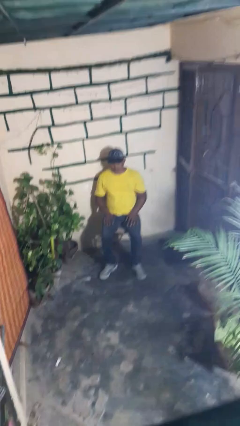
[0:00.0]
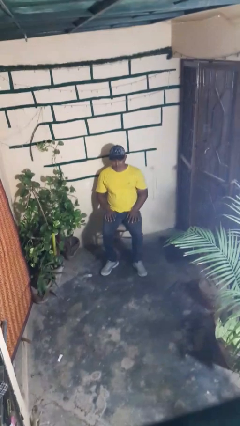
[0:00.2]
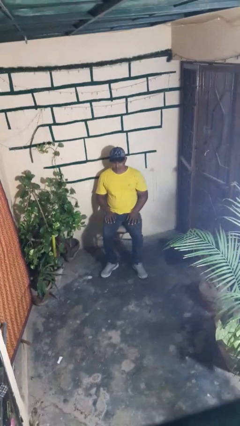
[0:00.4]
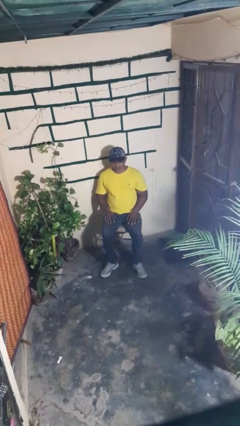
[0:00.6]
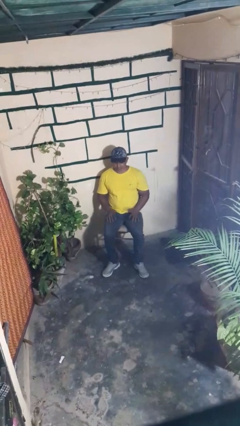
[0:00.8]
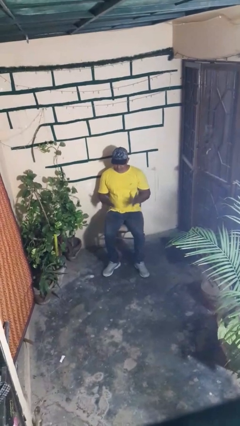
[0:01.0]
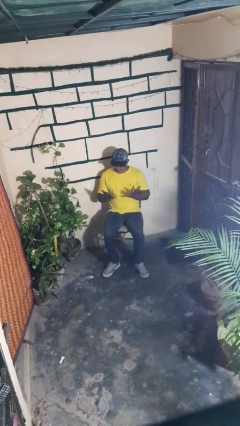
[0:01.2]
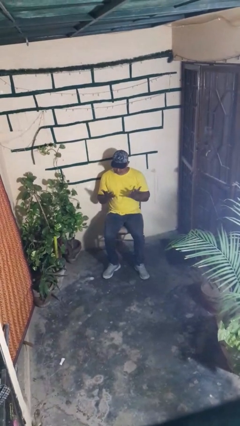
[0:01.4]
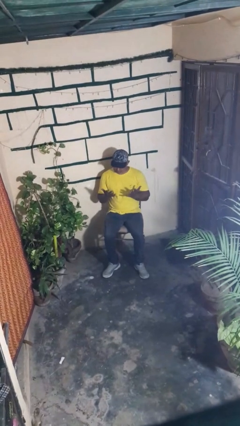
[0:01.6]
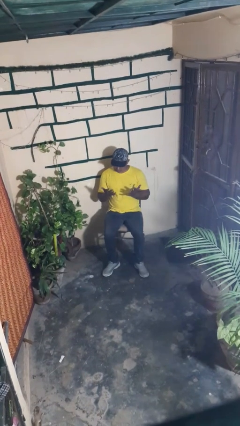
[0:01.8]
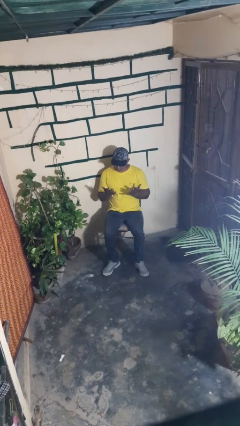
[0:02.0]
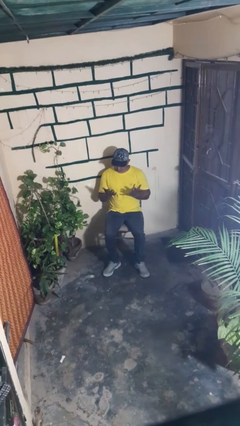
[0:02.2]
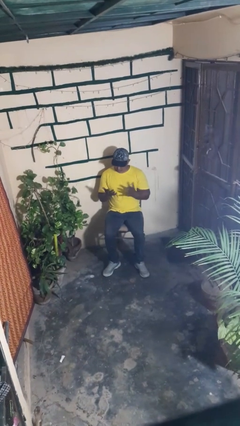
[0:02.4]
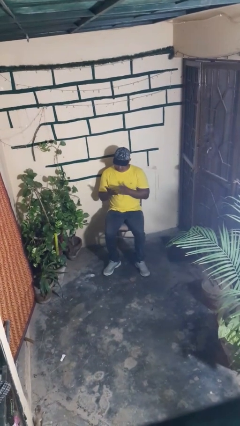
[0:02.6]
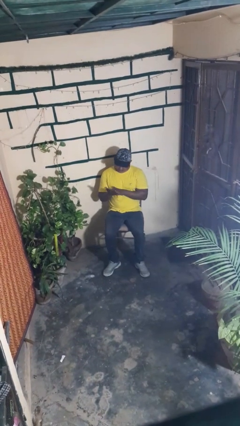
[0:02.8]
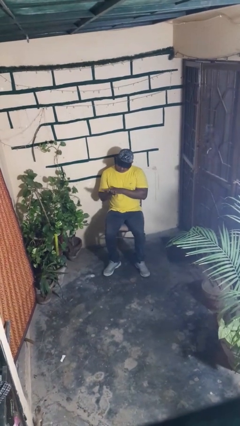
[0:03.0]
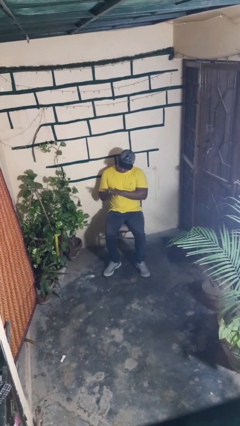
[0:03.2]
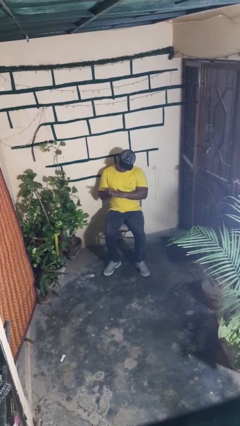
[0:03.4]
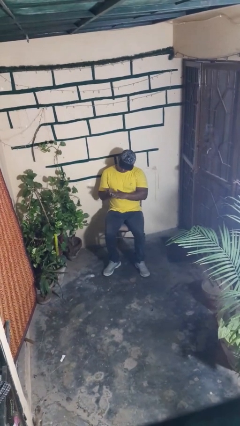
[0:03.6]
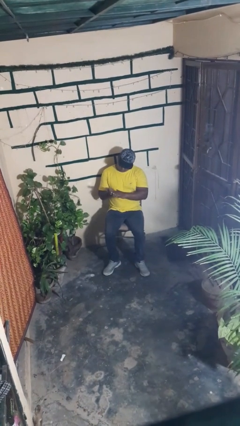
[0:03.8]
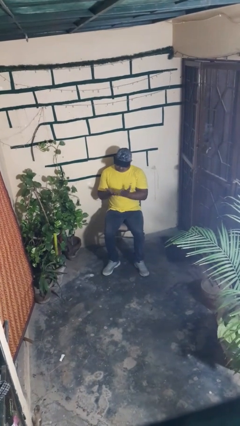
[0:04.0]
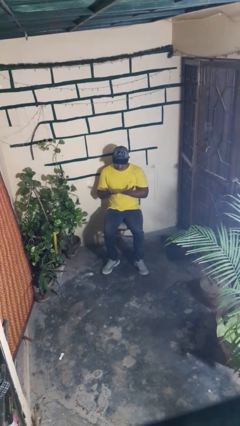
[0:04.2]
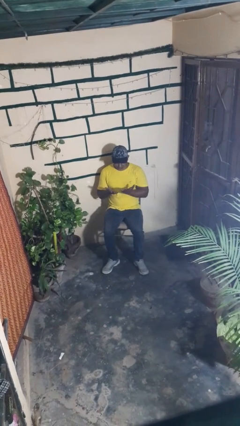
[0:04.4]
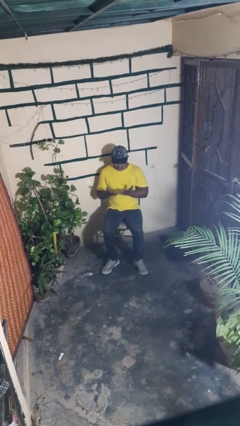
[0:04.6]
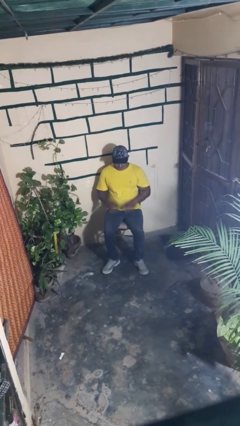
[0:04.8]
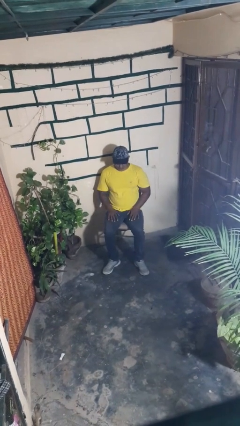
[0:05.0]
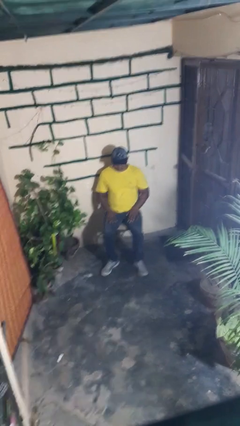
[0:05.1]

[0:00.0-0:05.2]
person looks at hands in lap

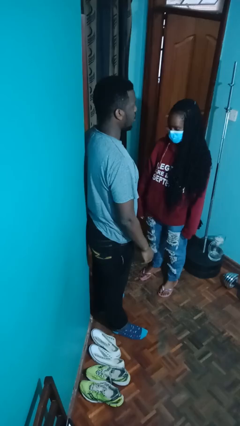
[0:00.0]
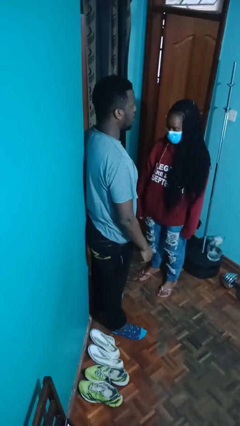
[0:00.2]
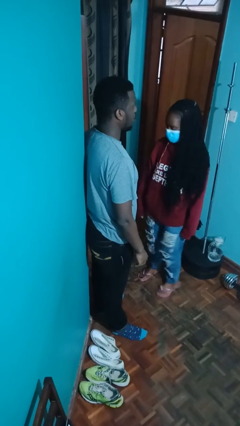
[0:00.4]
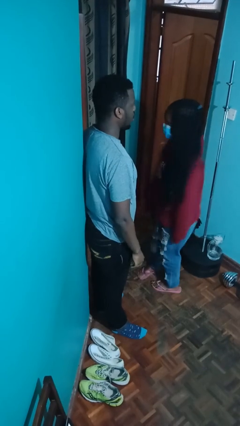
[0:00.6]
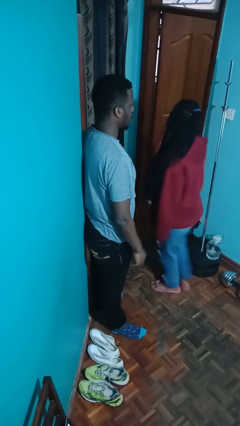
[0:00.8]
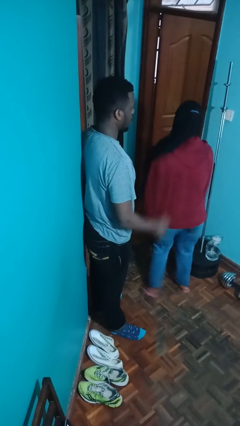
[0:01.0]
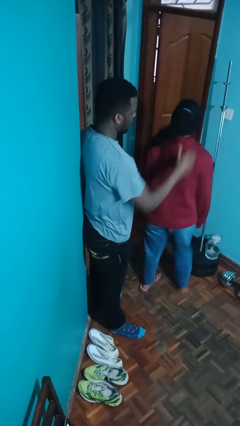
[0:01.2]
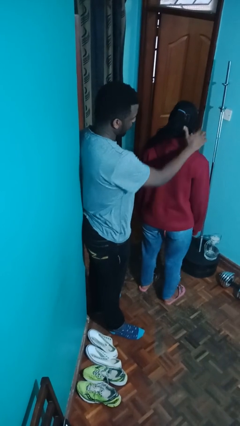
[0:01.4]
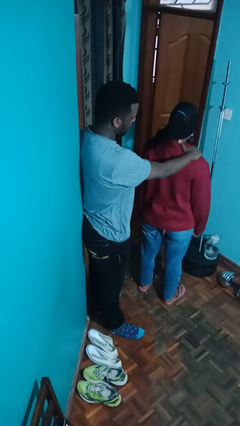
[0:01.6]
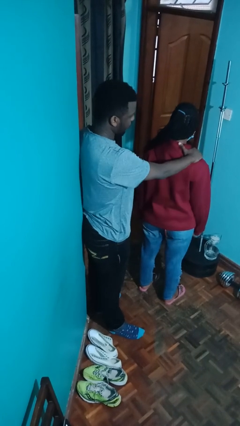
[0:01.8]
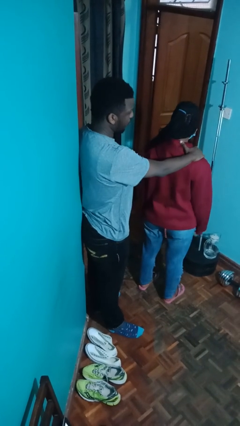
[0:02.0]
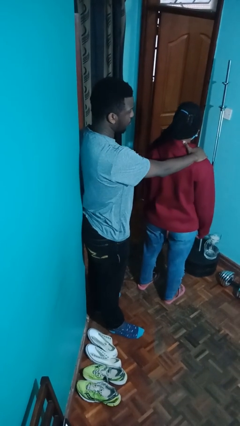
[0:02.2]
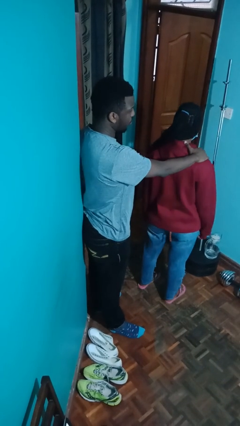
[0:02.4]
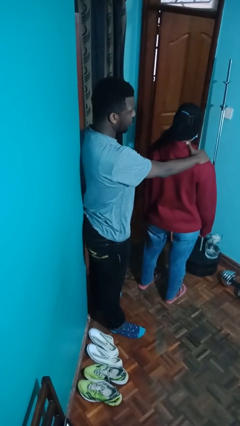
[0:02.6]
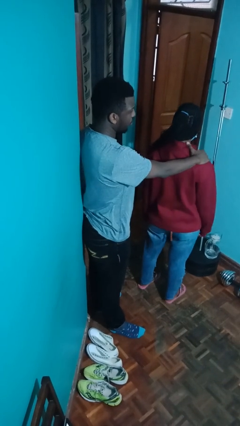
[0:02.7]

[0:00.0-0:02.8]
person grabs person by shoulder

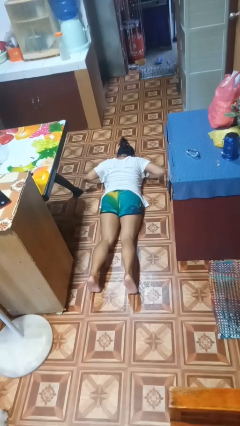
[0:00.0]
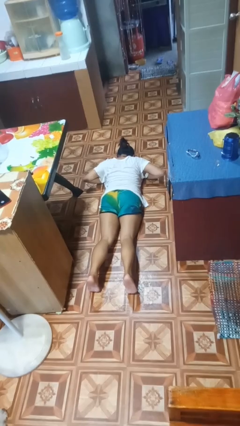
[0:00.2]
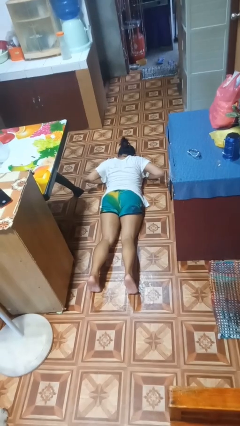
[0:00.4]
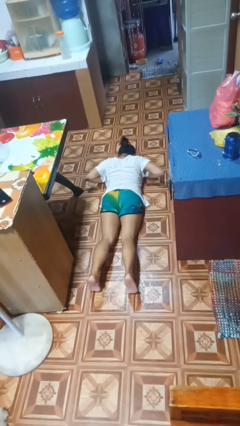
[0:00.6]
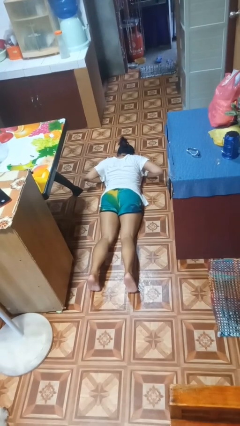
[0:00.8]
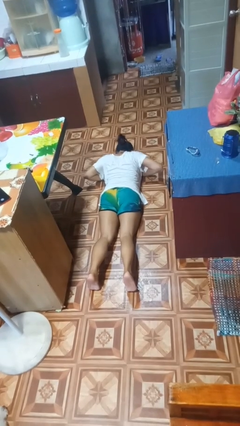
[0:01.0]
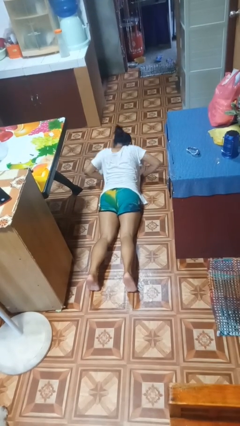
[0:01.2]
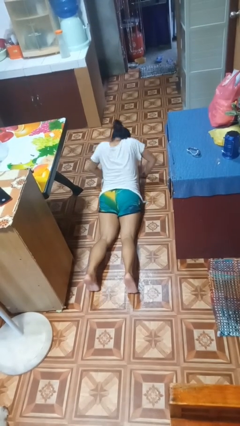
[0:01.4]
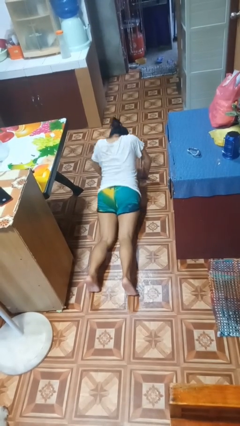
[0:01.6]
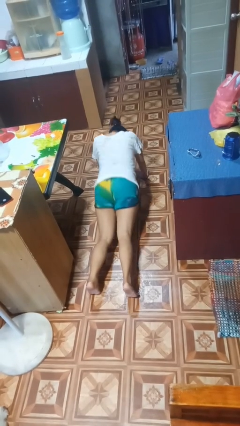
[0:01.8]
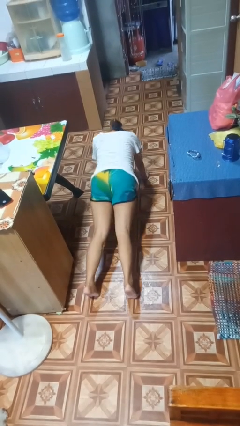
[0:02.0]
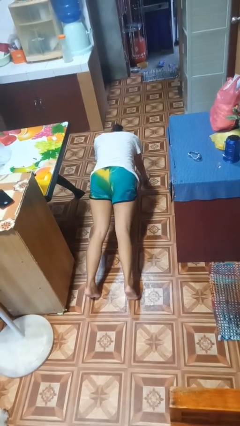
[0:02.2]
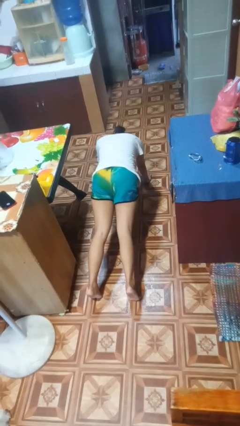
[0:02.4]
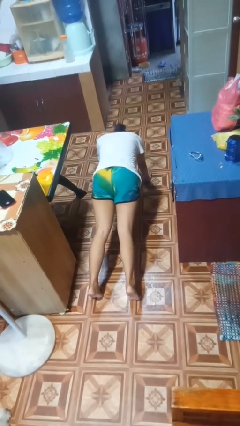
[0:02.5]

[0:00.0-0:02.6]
person exercises with pushup

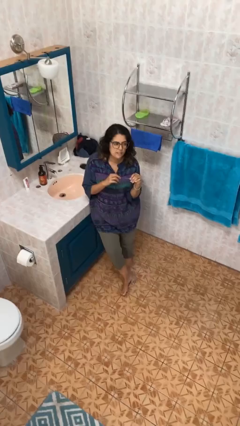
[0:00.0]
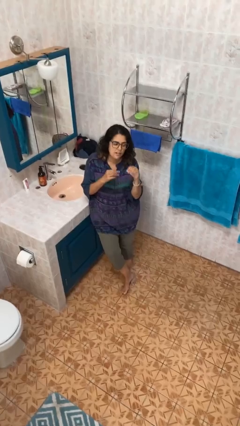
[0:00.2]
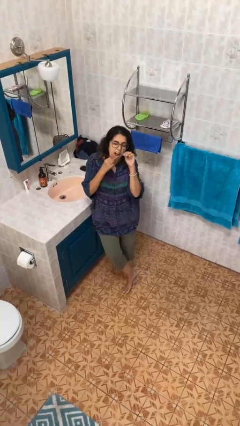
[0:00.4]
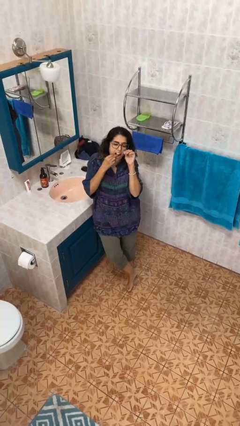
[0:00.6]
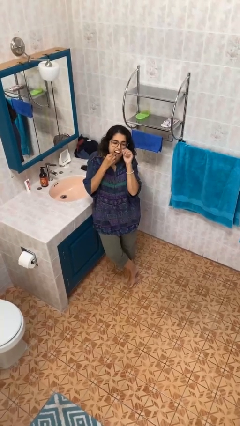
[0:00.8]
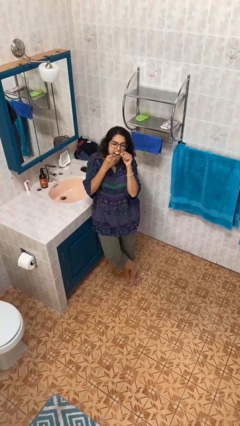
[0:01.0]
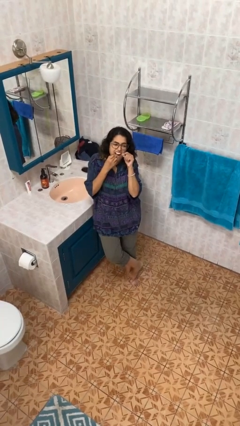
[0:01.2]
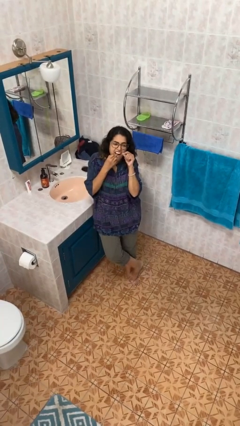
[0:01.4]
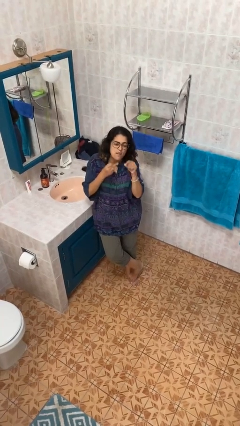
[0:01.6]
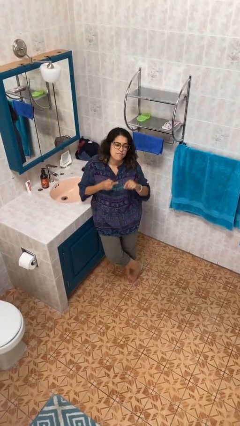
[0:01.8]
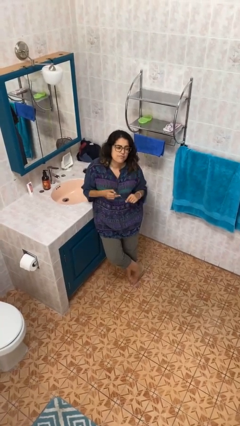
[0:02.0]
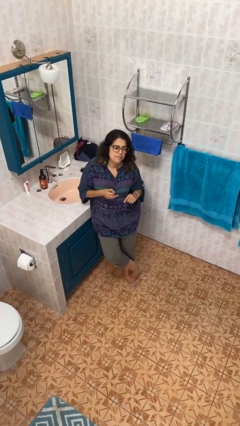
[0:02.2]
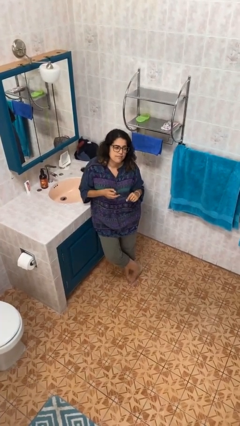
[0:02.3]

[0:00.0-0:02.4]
person flosses

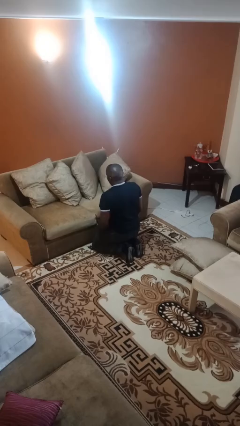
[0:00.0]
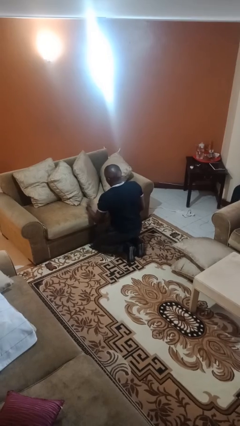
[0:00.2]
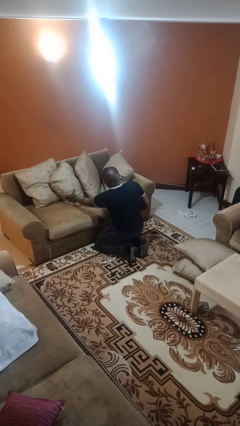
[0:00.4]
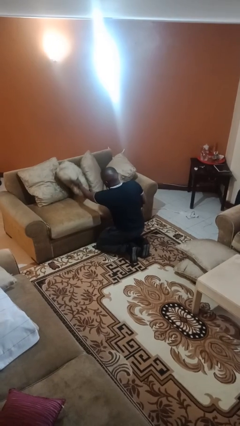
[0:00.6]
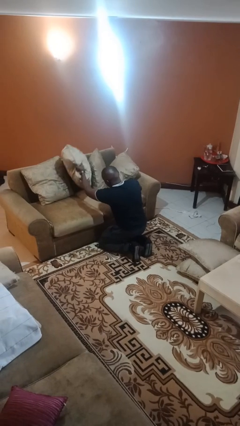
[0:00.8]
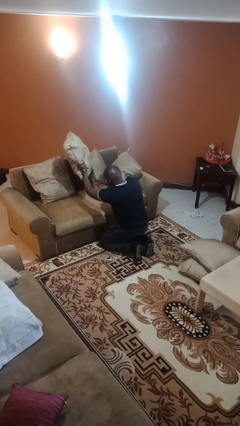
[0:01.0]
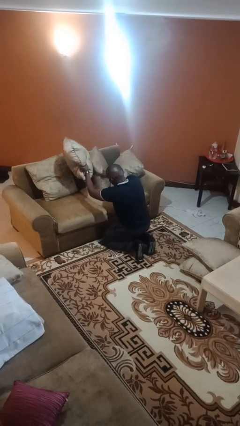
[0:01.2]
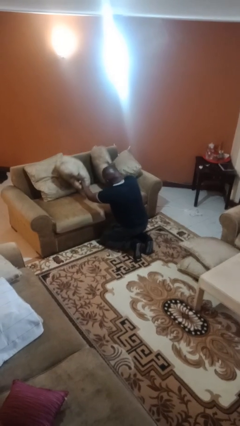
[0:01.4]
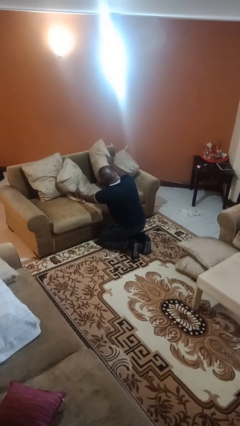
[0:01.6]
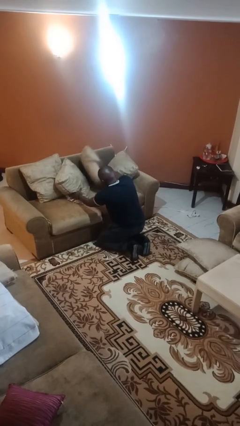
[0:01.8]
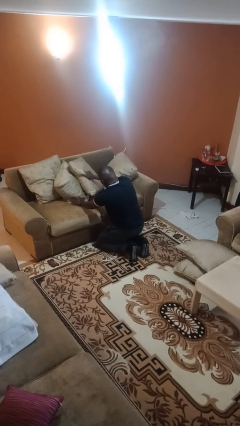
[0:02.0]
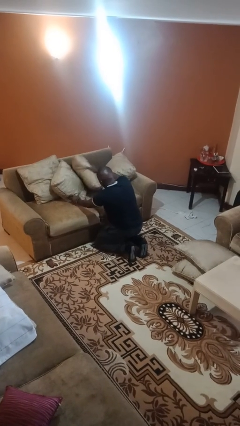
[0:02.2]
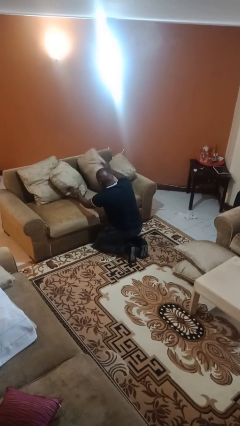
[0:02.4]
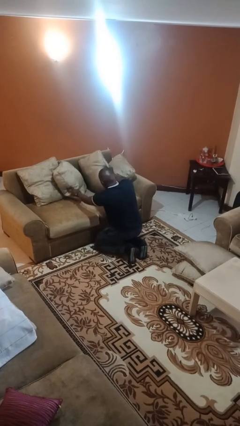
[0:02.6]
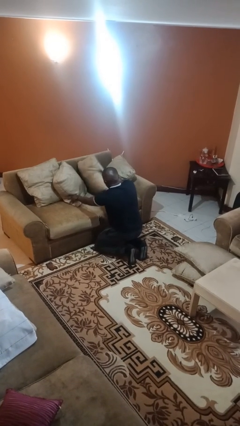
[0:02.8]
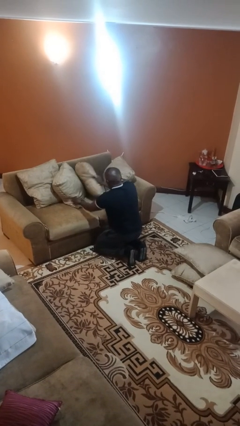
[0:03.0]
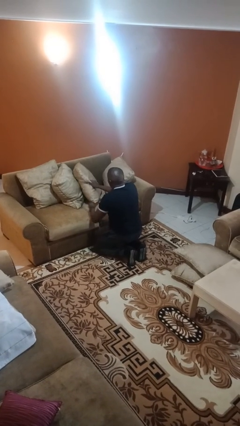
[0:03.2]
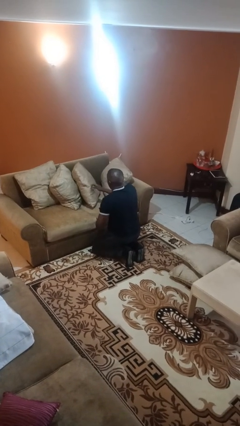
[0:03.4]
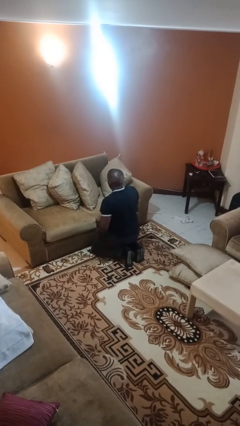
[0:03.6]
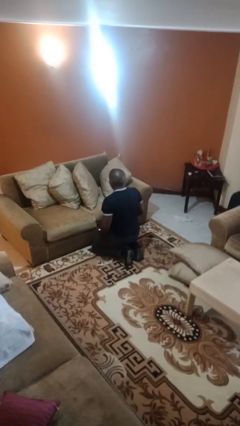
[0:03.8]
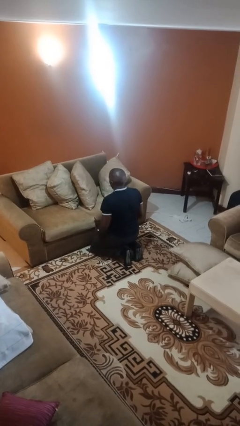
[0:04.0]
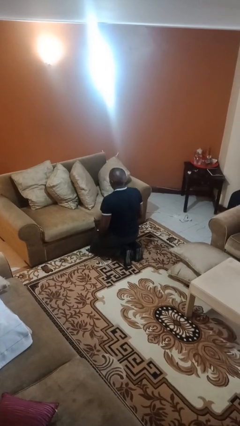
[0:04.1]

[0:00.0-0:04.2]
person searches in couch

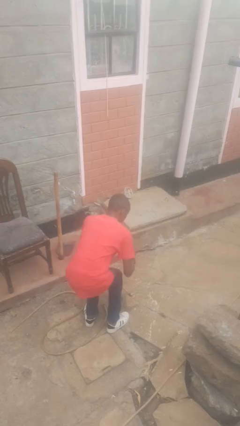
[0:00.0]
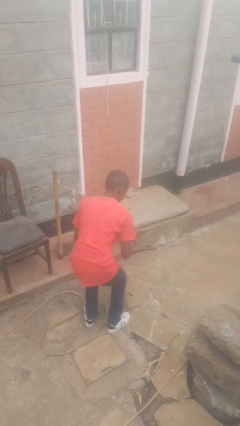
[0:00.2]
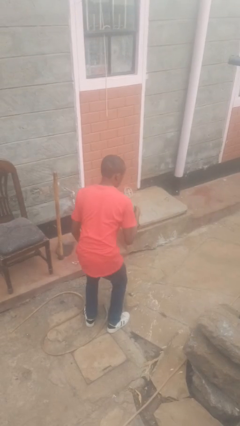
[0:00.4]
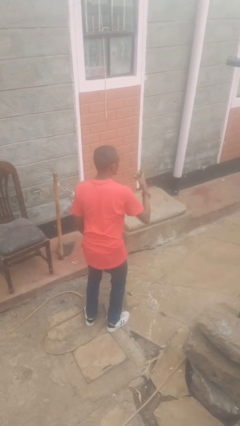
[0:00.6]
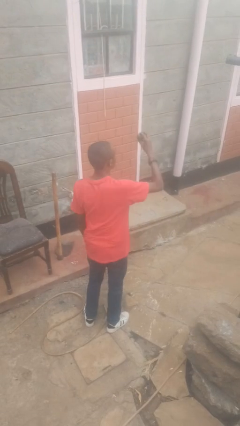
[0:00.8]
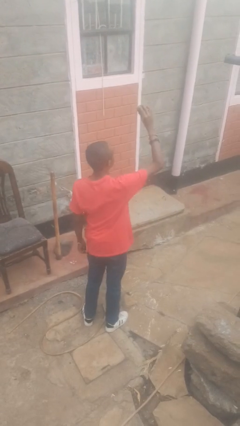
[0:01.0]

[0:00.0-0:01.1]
person catches dropped object
